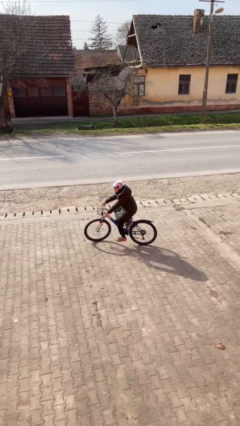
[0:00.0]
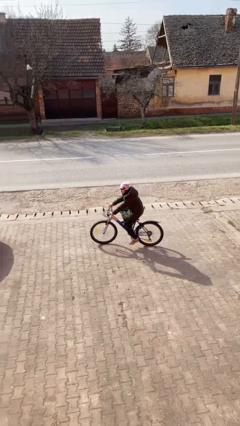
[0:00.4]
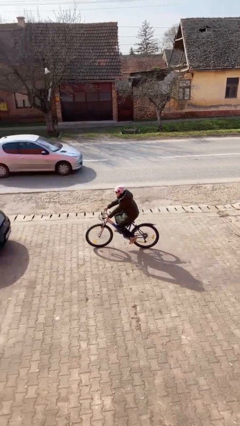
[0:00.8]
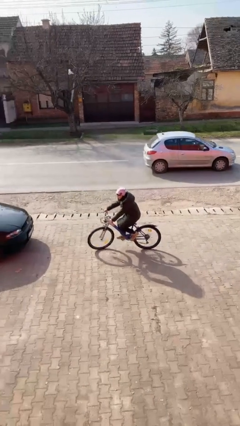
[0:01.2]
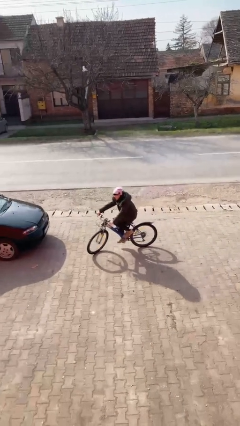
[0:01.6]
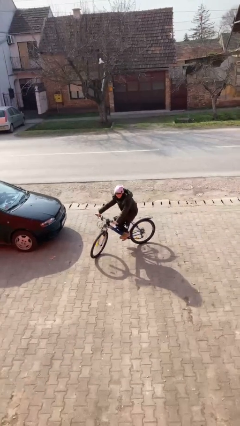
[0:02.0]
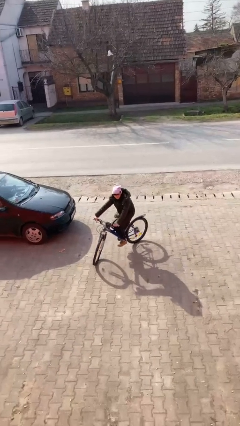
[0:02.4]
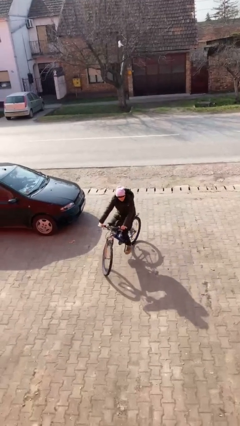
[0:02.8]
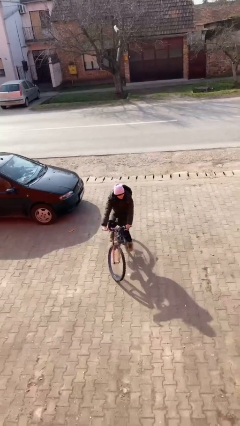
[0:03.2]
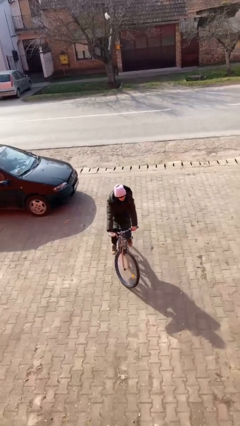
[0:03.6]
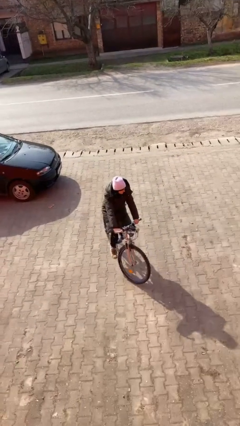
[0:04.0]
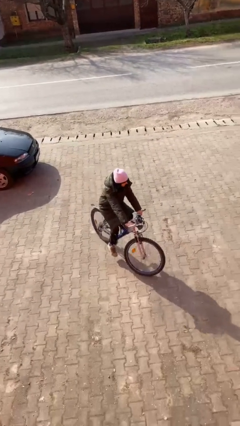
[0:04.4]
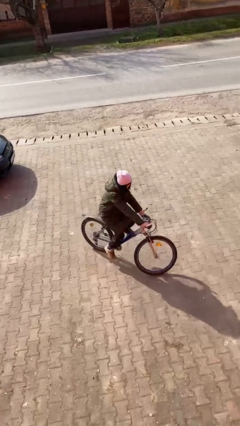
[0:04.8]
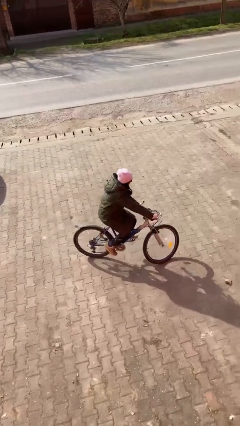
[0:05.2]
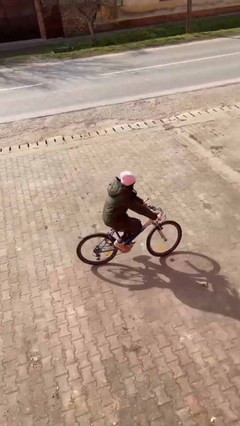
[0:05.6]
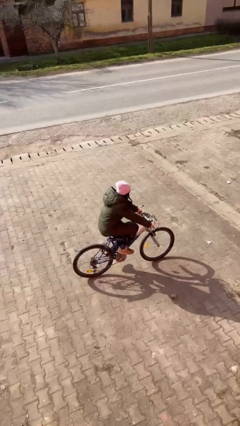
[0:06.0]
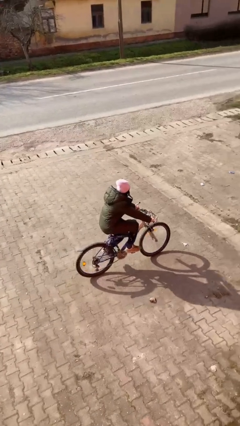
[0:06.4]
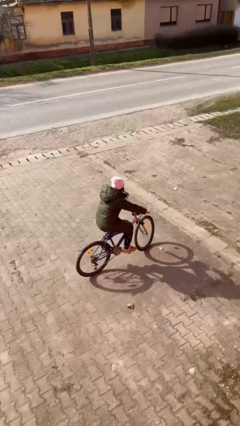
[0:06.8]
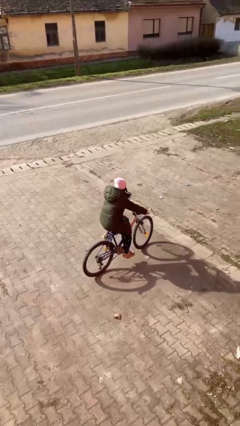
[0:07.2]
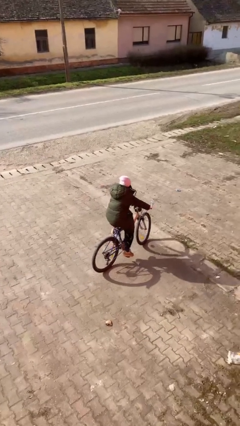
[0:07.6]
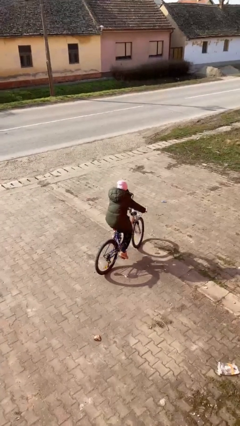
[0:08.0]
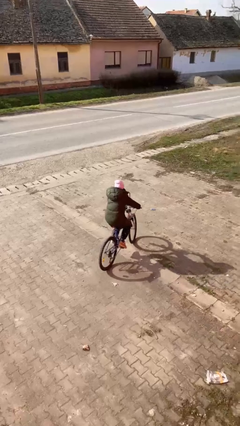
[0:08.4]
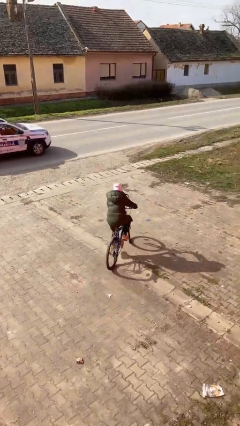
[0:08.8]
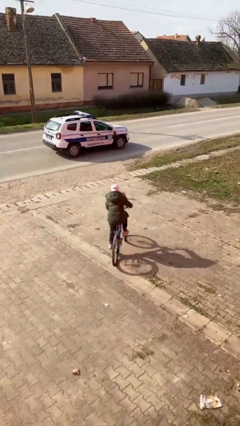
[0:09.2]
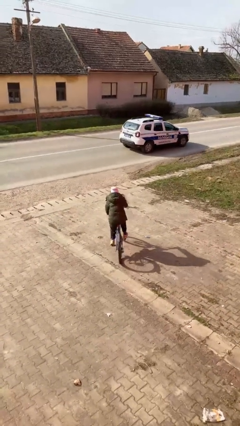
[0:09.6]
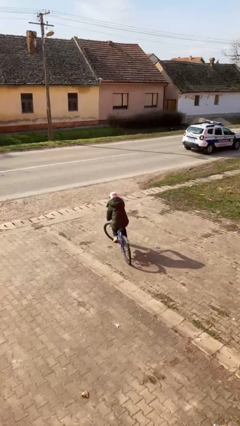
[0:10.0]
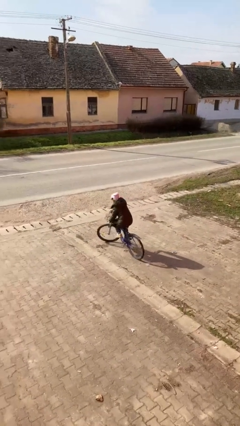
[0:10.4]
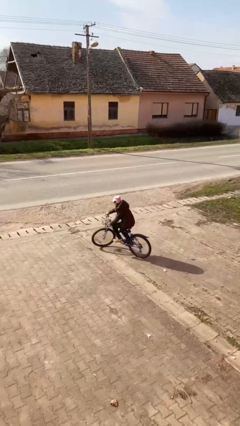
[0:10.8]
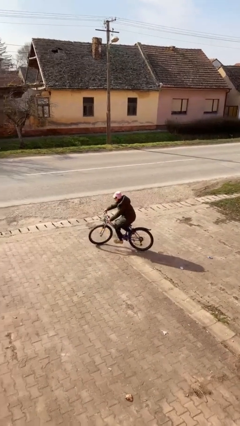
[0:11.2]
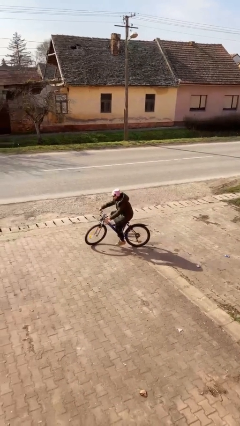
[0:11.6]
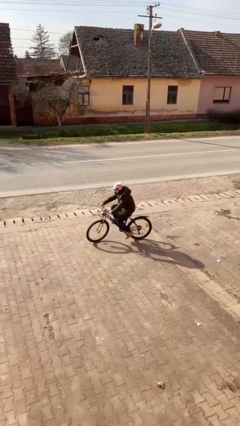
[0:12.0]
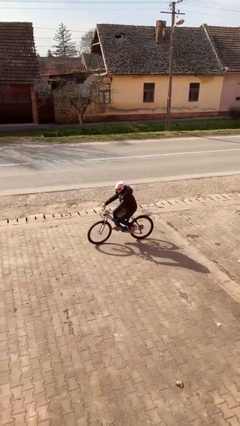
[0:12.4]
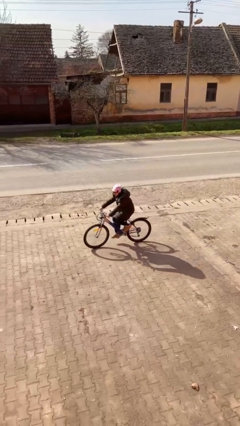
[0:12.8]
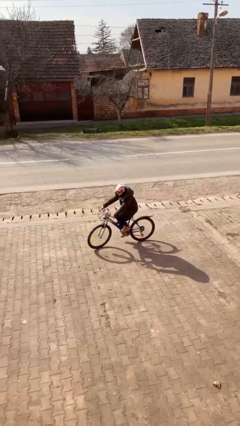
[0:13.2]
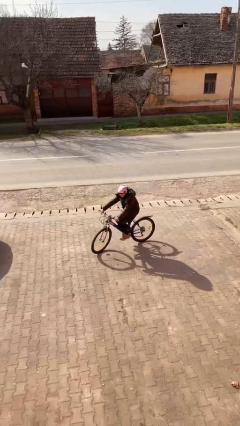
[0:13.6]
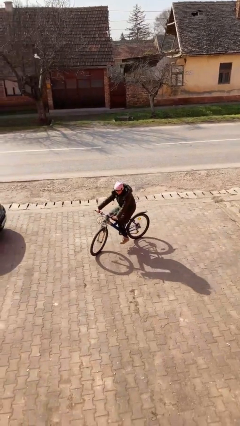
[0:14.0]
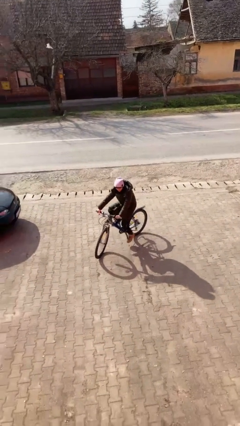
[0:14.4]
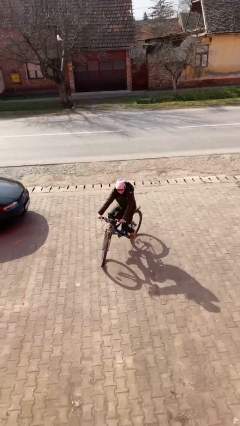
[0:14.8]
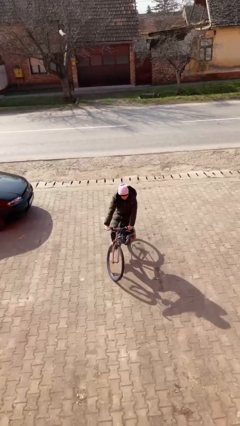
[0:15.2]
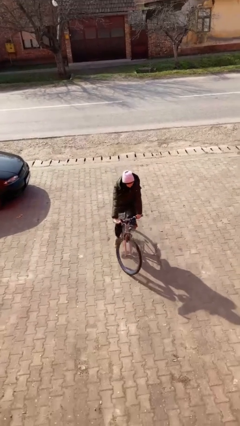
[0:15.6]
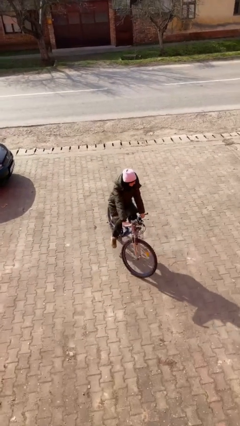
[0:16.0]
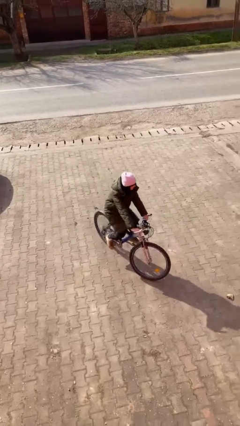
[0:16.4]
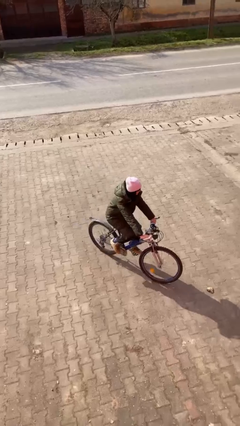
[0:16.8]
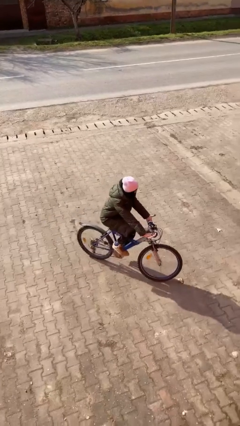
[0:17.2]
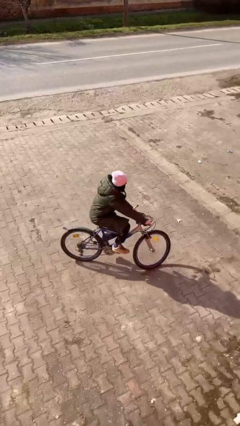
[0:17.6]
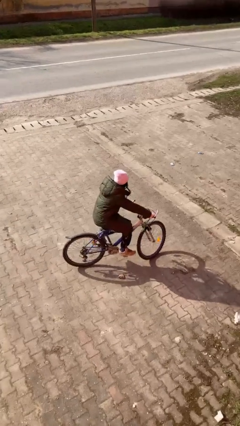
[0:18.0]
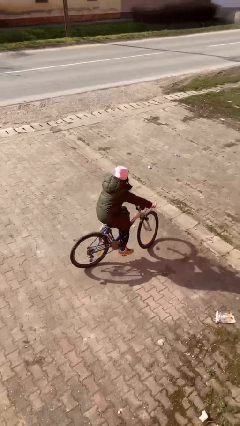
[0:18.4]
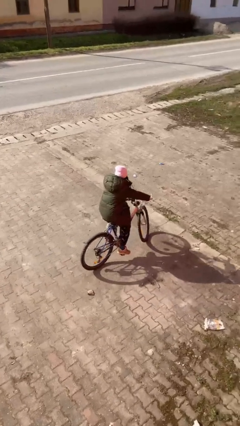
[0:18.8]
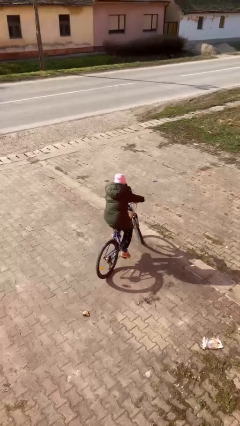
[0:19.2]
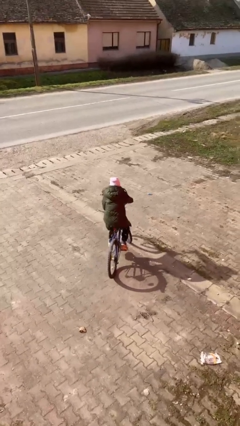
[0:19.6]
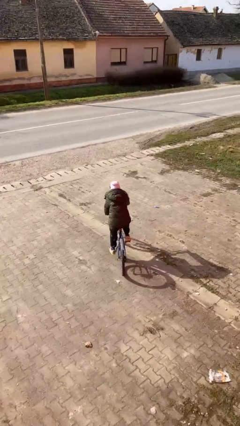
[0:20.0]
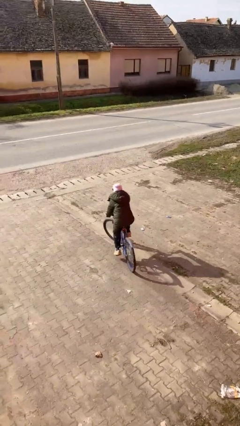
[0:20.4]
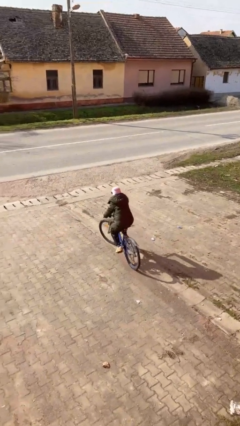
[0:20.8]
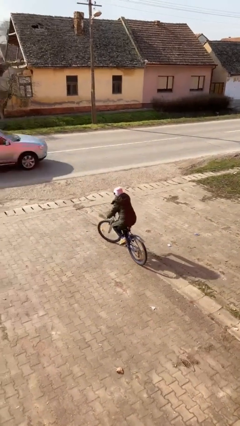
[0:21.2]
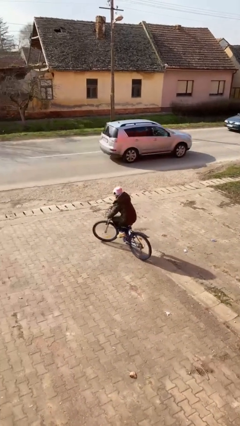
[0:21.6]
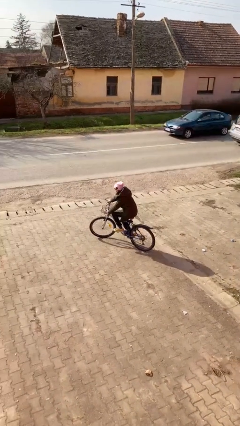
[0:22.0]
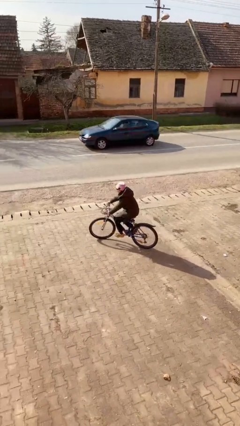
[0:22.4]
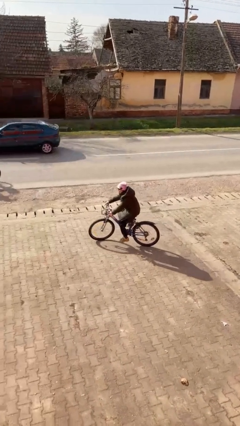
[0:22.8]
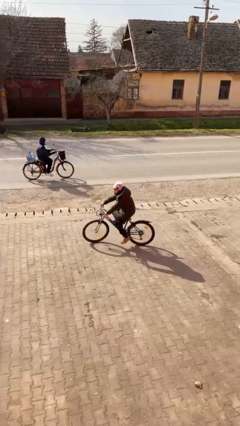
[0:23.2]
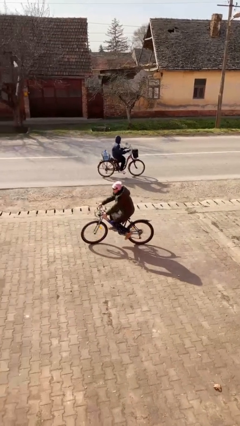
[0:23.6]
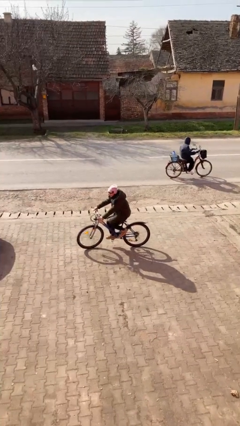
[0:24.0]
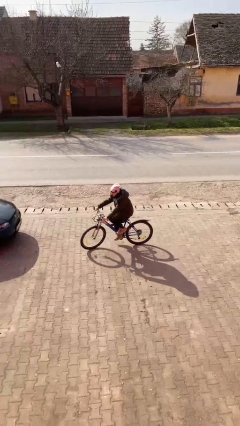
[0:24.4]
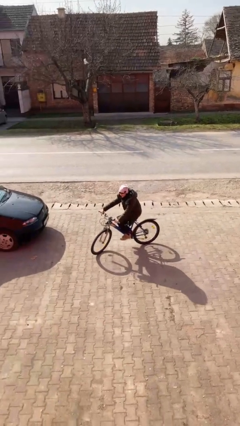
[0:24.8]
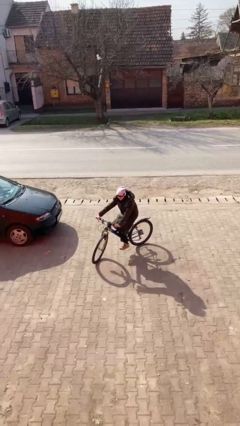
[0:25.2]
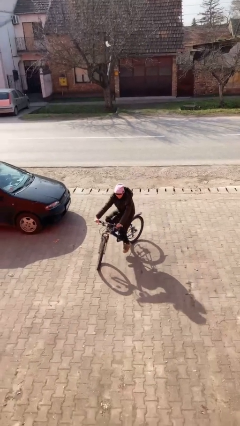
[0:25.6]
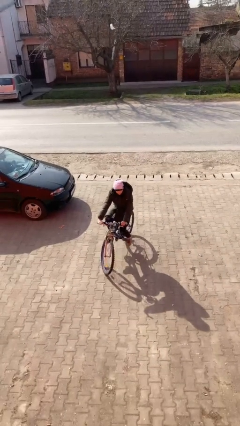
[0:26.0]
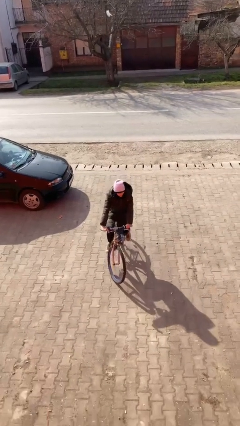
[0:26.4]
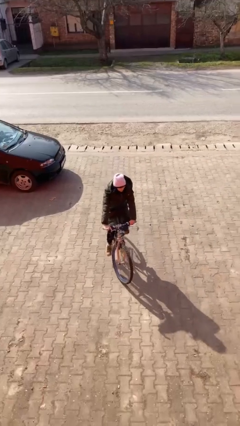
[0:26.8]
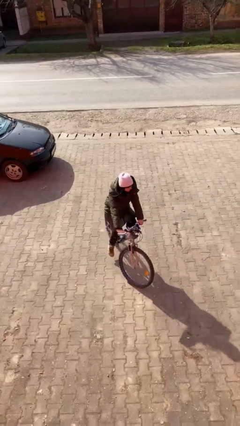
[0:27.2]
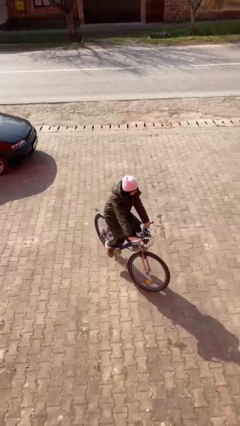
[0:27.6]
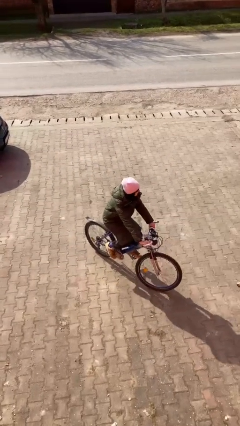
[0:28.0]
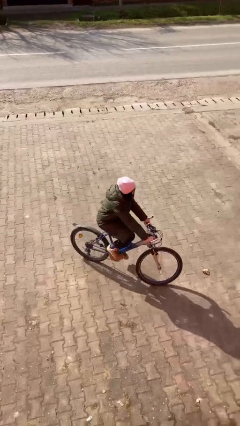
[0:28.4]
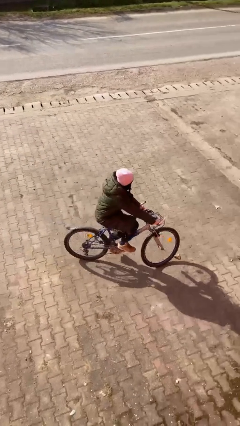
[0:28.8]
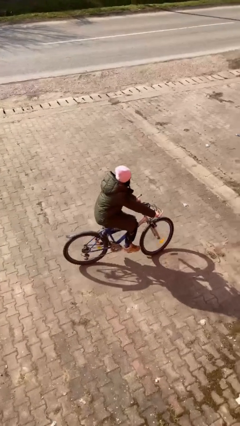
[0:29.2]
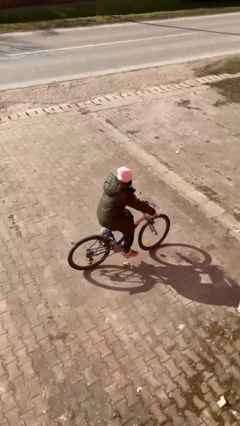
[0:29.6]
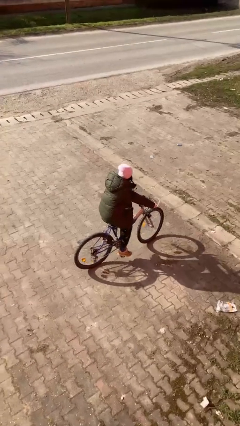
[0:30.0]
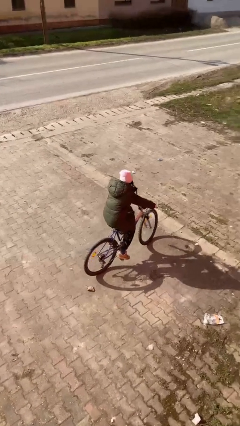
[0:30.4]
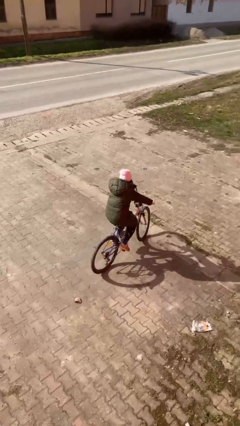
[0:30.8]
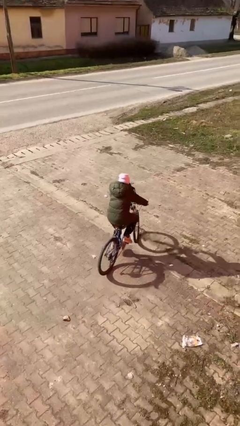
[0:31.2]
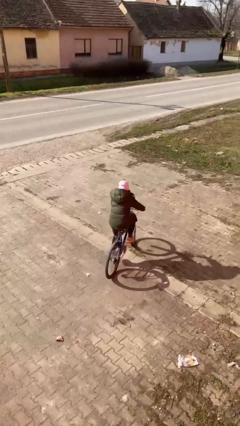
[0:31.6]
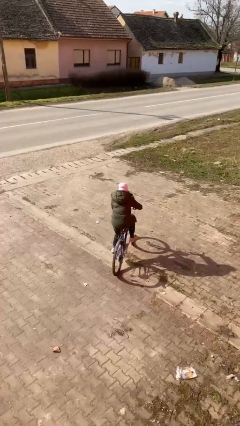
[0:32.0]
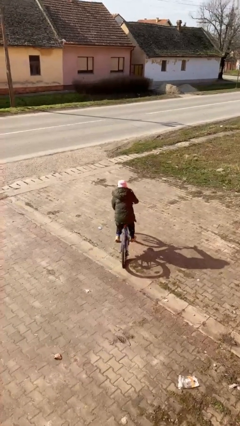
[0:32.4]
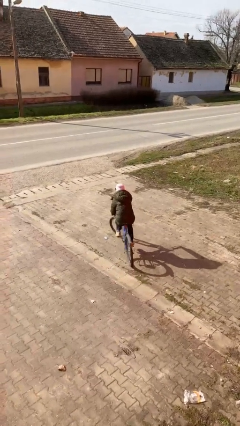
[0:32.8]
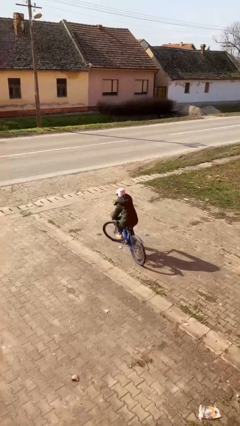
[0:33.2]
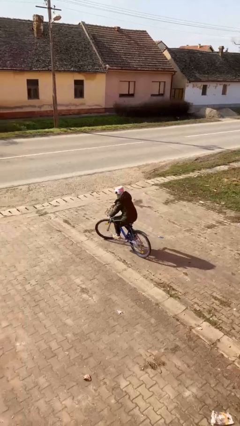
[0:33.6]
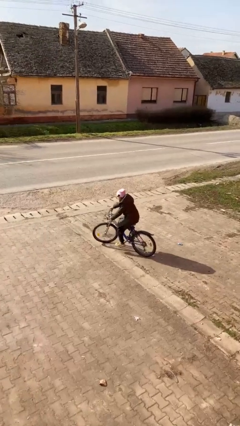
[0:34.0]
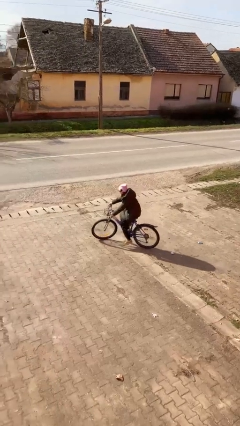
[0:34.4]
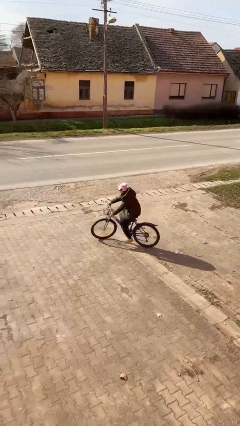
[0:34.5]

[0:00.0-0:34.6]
person rides bicycle

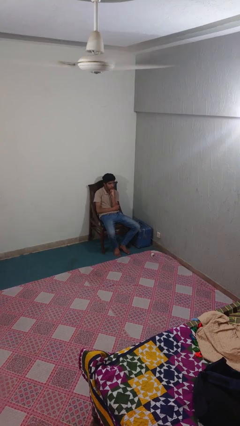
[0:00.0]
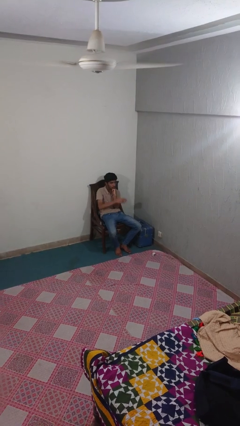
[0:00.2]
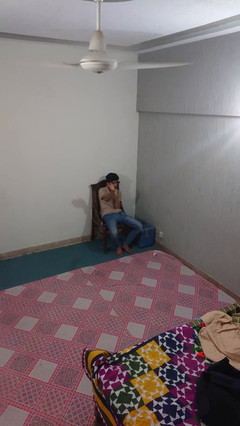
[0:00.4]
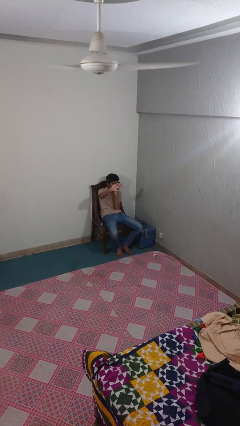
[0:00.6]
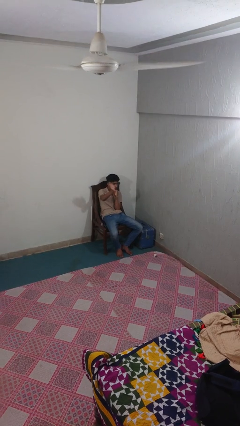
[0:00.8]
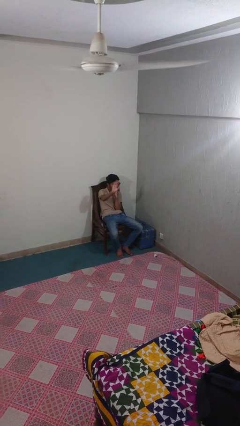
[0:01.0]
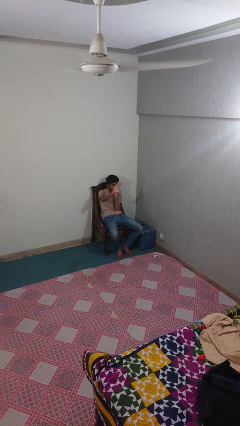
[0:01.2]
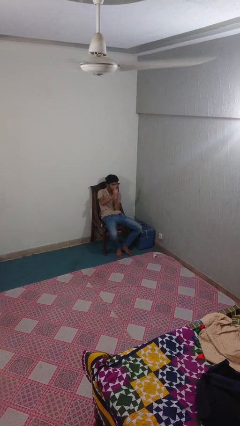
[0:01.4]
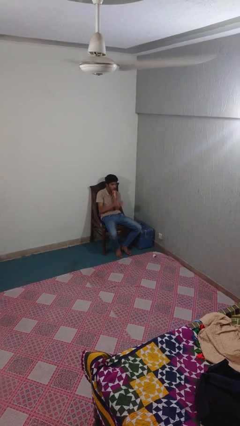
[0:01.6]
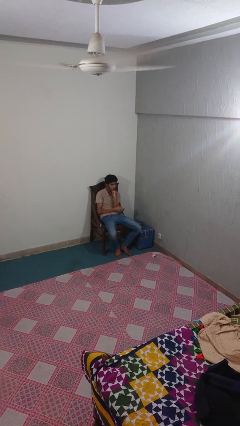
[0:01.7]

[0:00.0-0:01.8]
person waves at person
